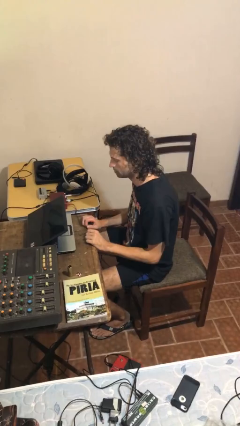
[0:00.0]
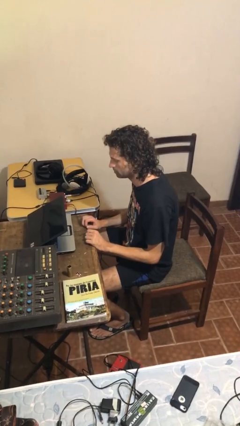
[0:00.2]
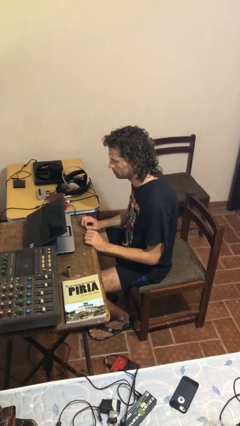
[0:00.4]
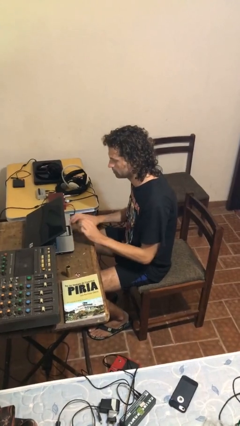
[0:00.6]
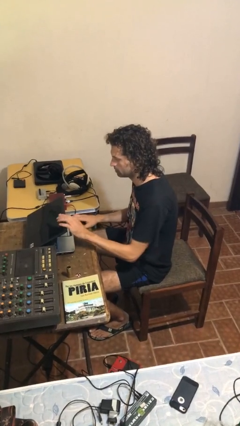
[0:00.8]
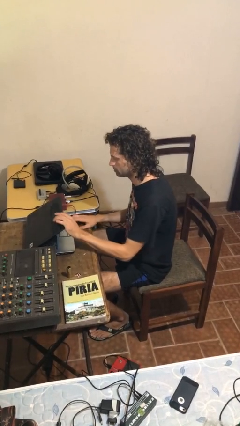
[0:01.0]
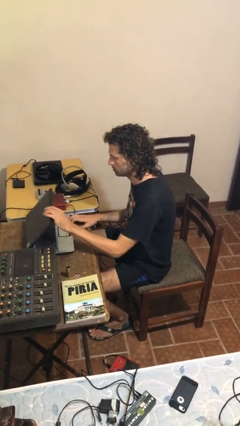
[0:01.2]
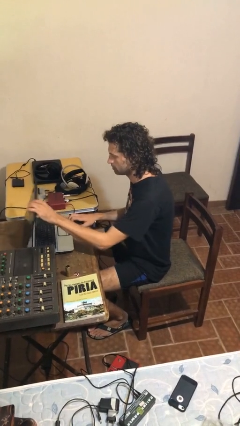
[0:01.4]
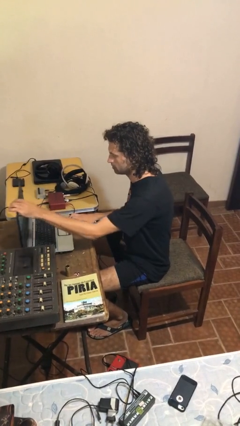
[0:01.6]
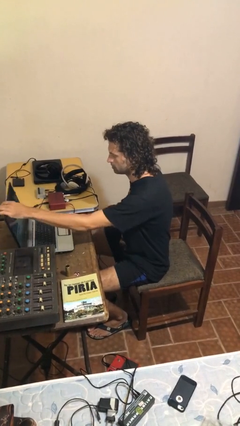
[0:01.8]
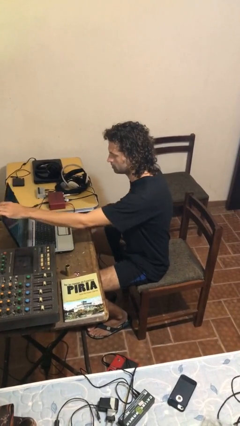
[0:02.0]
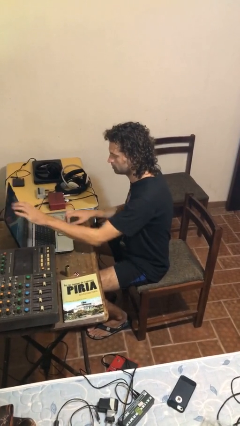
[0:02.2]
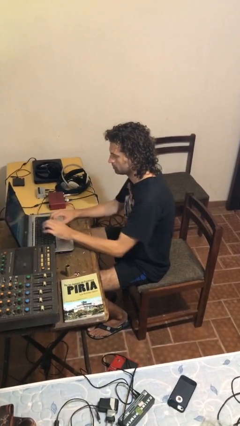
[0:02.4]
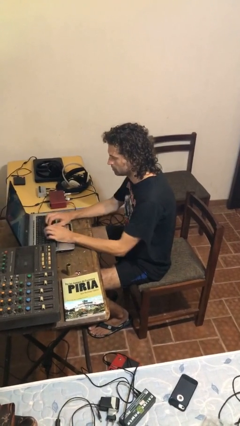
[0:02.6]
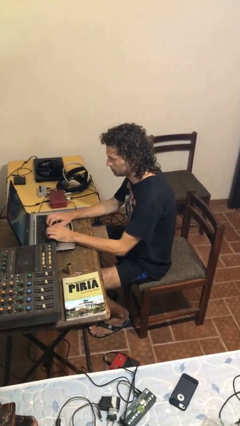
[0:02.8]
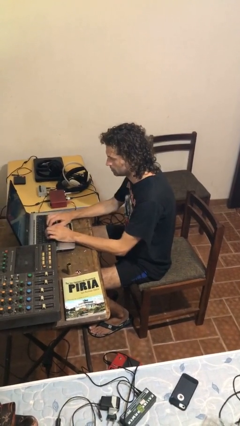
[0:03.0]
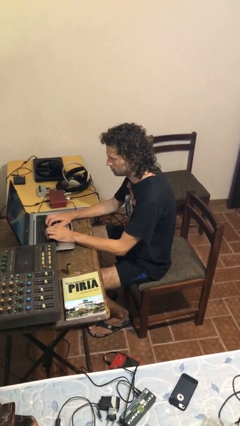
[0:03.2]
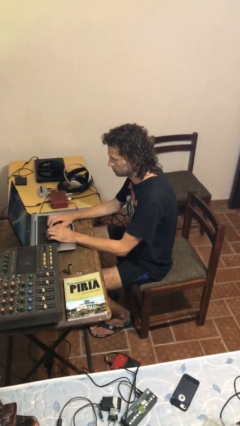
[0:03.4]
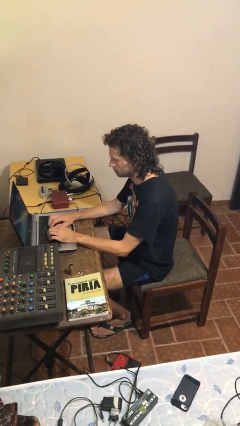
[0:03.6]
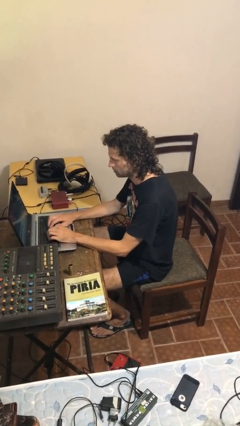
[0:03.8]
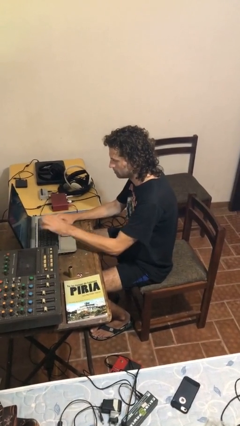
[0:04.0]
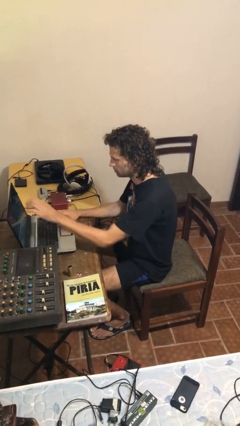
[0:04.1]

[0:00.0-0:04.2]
person interacts with laptop

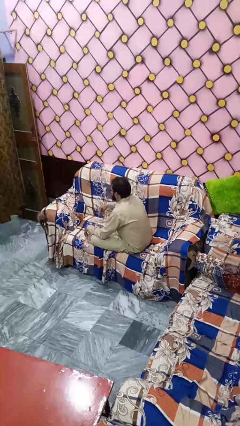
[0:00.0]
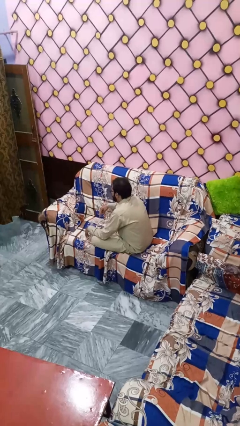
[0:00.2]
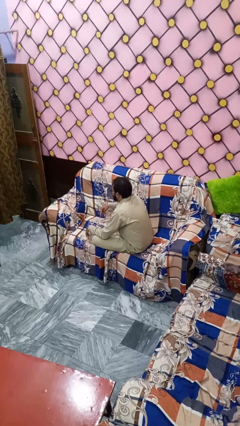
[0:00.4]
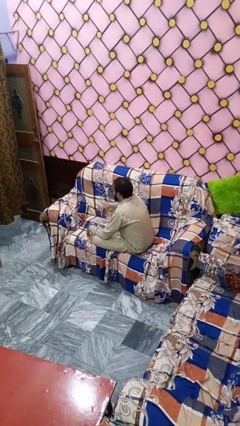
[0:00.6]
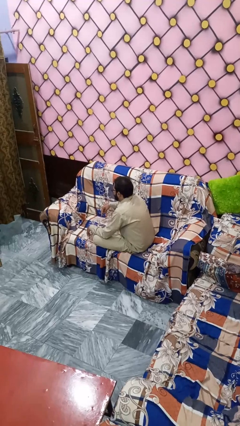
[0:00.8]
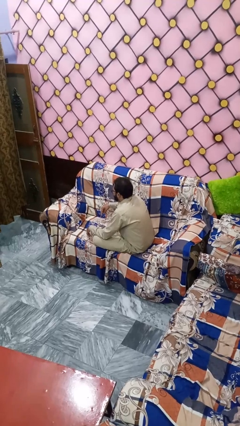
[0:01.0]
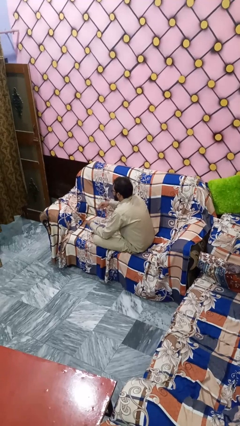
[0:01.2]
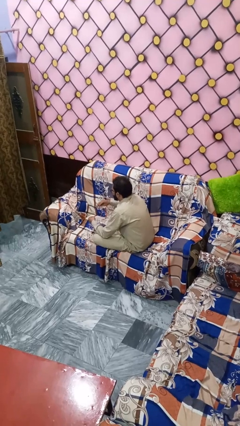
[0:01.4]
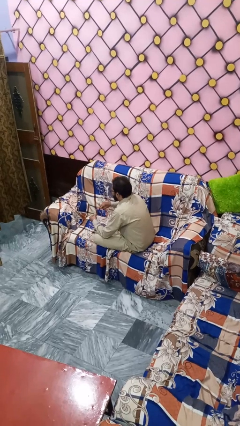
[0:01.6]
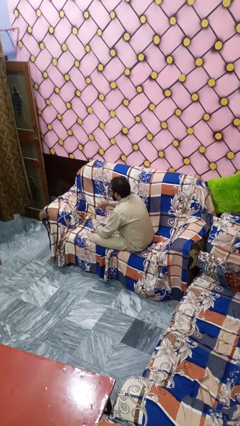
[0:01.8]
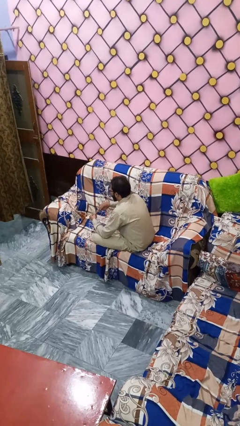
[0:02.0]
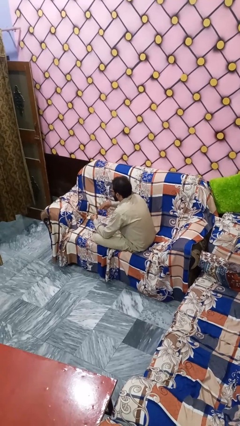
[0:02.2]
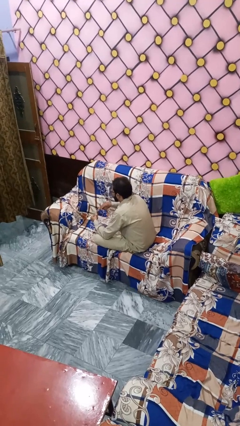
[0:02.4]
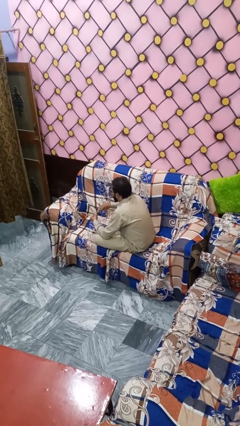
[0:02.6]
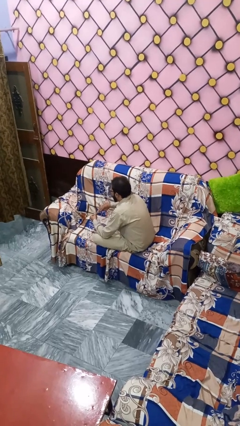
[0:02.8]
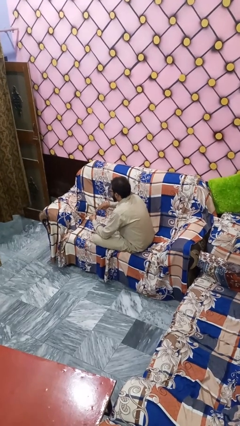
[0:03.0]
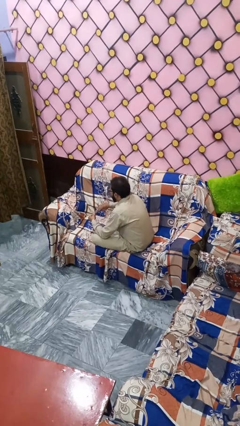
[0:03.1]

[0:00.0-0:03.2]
person paints fingernails

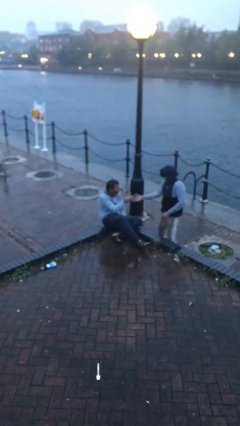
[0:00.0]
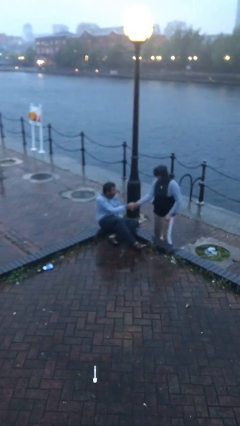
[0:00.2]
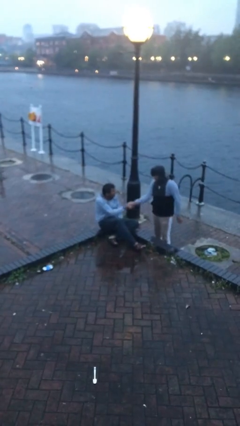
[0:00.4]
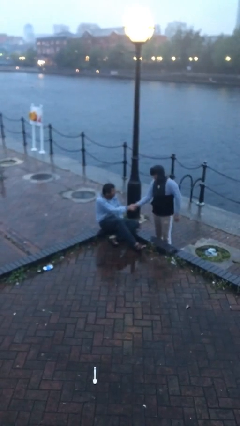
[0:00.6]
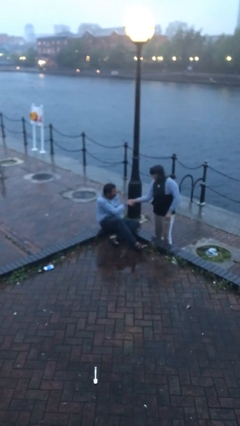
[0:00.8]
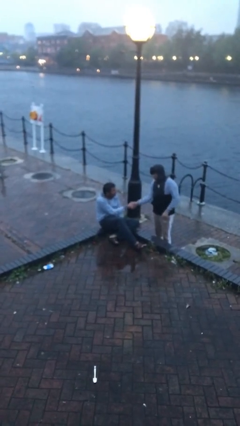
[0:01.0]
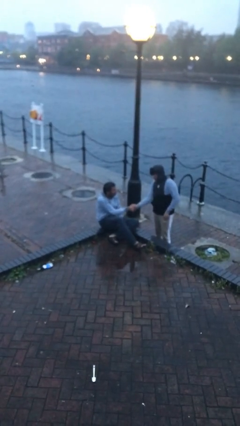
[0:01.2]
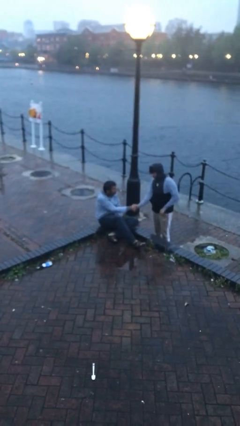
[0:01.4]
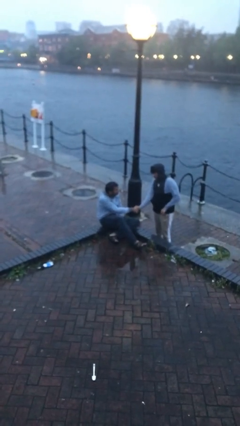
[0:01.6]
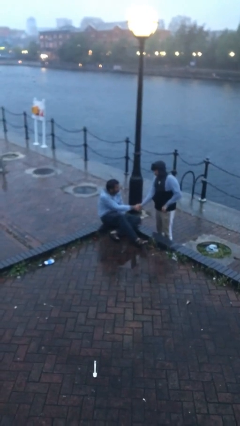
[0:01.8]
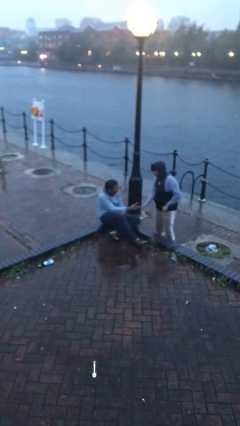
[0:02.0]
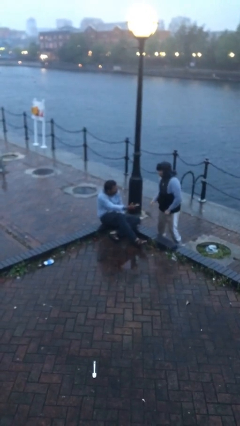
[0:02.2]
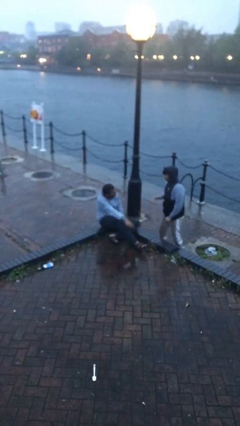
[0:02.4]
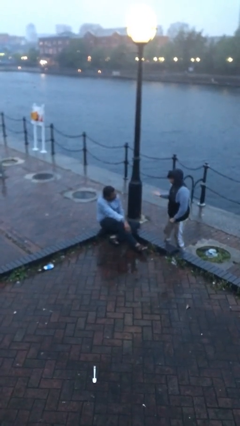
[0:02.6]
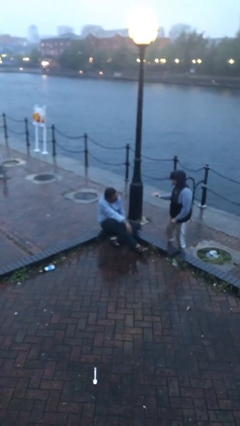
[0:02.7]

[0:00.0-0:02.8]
person shakes hand

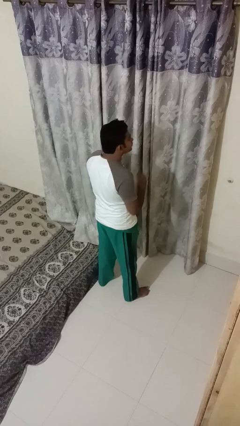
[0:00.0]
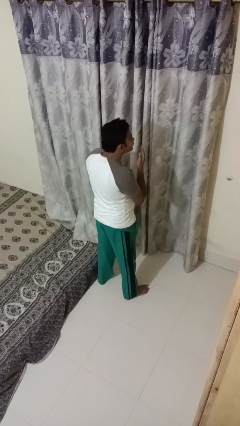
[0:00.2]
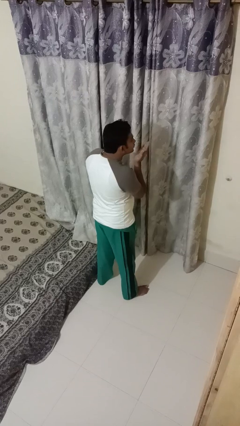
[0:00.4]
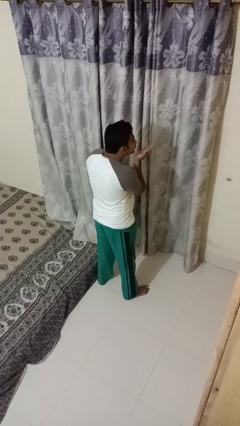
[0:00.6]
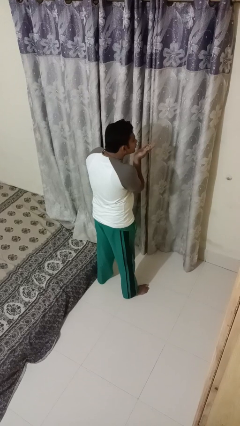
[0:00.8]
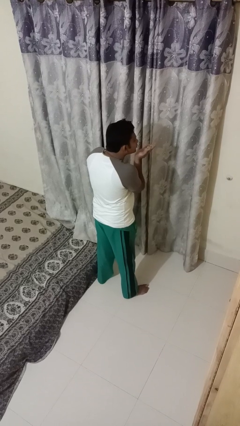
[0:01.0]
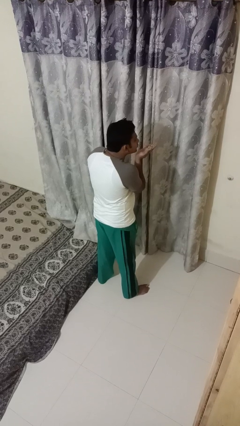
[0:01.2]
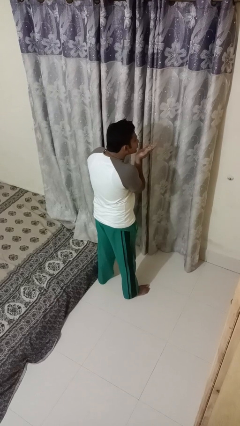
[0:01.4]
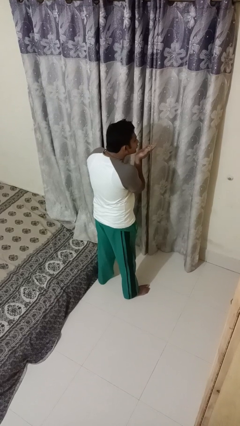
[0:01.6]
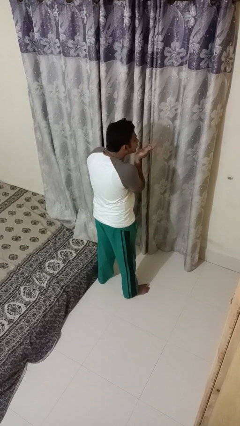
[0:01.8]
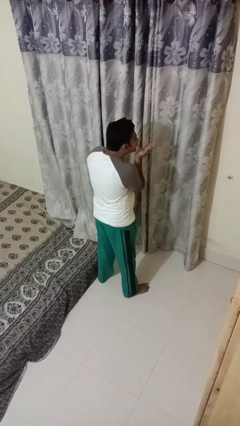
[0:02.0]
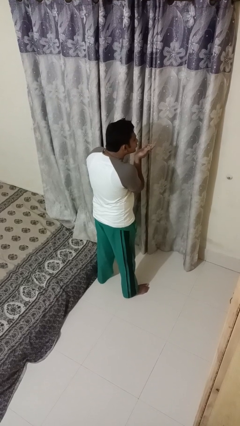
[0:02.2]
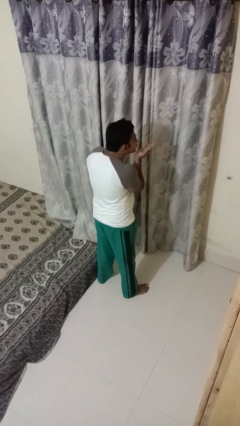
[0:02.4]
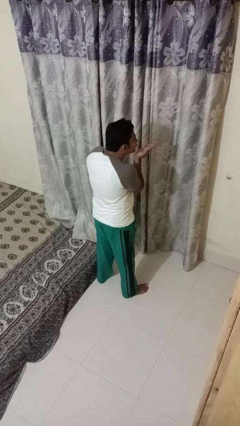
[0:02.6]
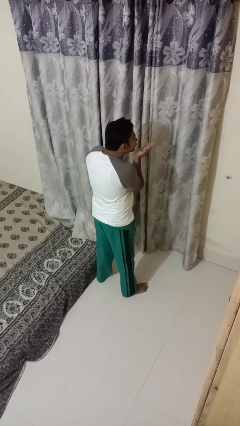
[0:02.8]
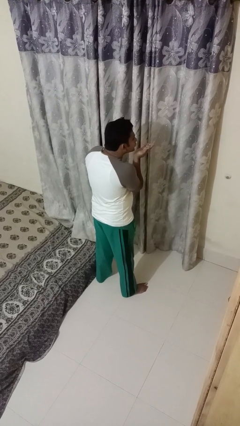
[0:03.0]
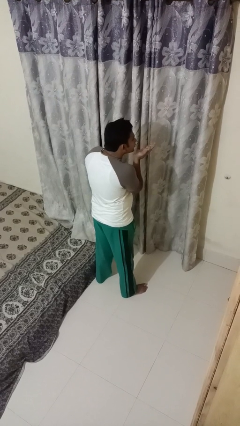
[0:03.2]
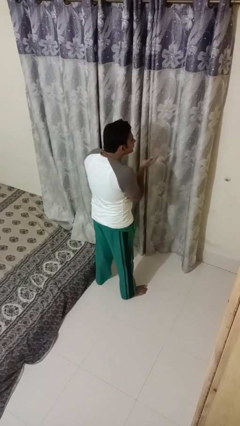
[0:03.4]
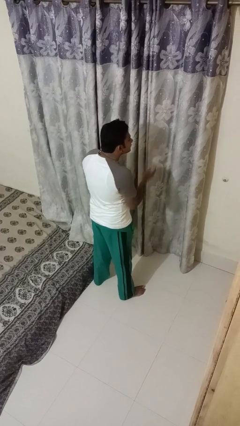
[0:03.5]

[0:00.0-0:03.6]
person gestures blow kiss

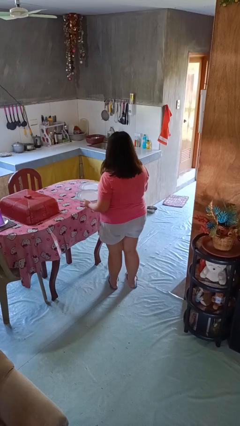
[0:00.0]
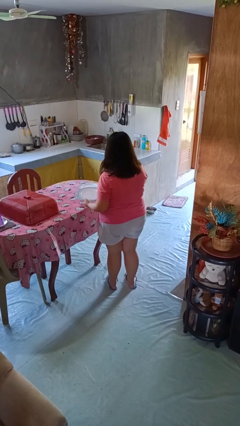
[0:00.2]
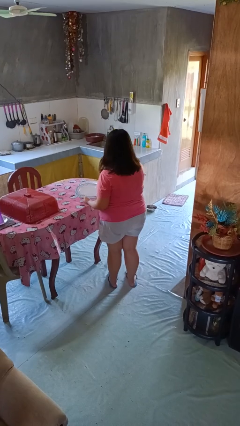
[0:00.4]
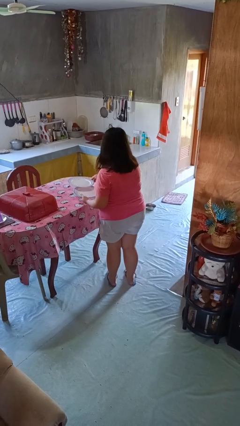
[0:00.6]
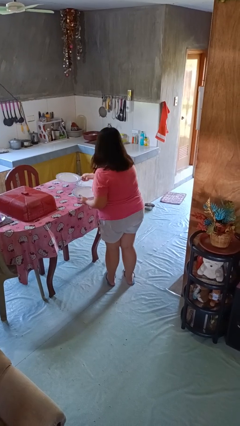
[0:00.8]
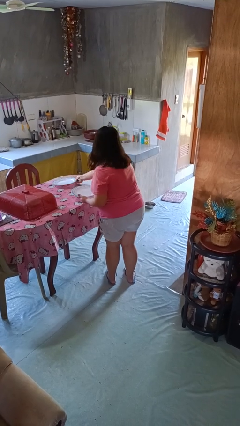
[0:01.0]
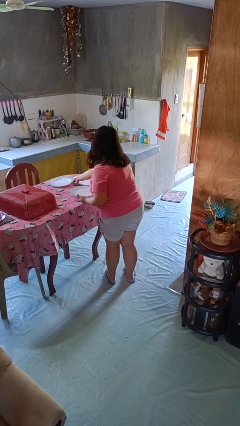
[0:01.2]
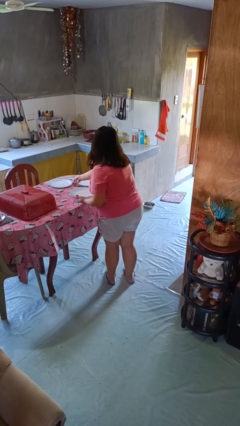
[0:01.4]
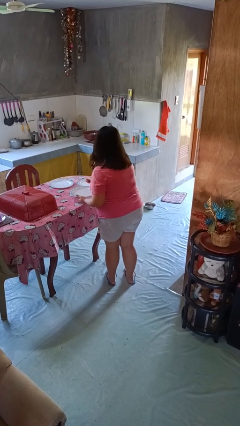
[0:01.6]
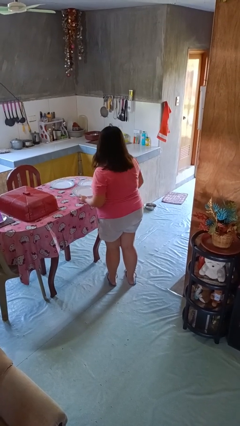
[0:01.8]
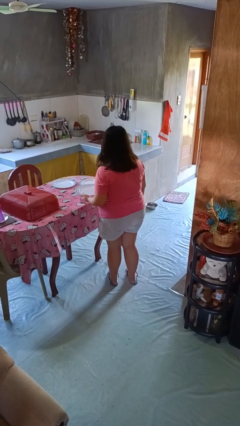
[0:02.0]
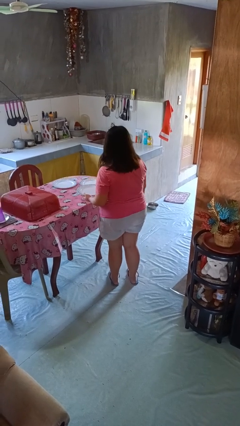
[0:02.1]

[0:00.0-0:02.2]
person sets table

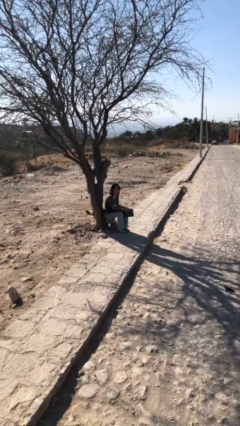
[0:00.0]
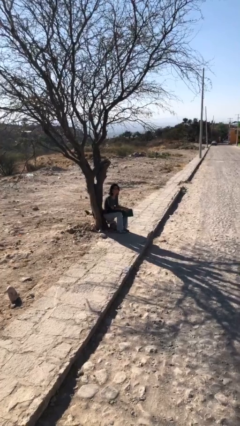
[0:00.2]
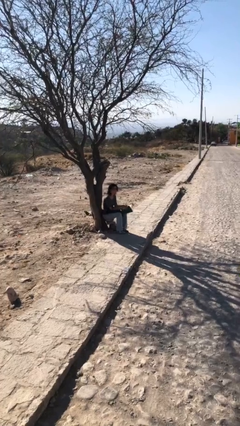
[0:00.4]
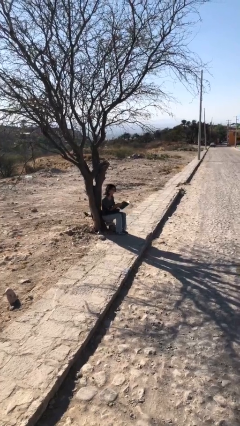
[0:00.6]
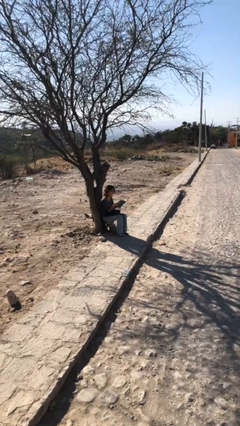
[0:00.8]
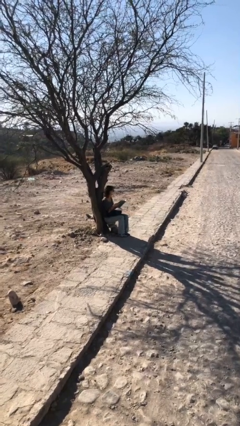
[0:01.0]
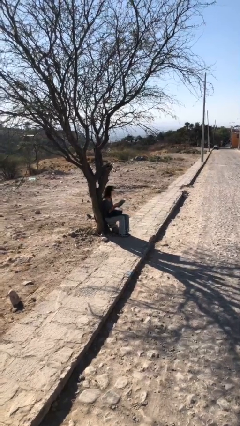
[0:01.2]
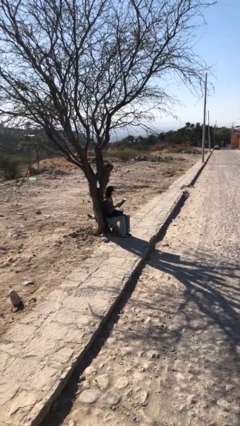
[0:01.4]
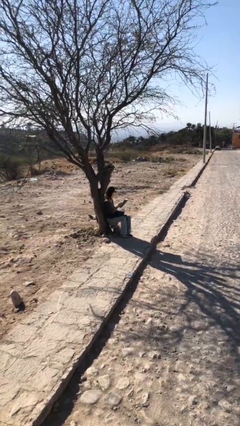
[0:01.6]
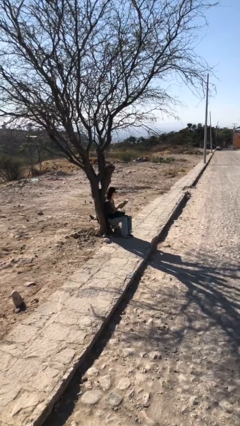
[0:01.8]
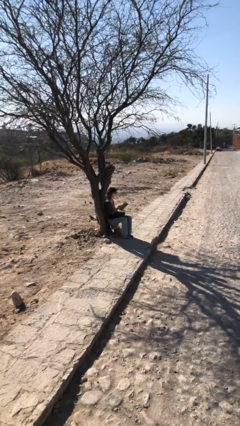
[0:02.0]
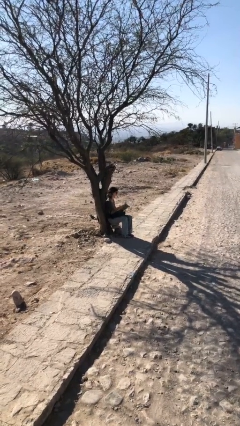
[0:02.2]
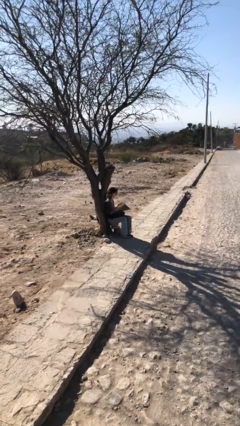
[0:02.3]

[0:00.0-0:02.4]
person reads document
